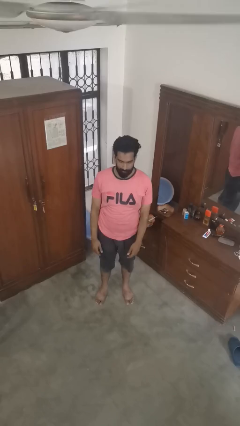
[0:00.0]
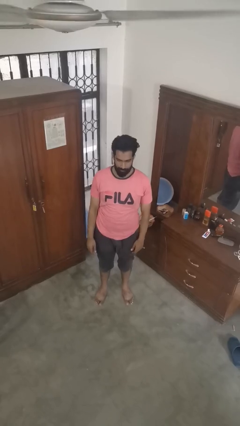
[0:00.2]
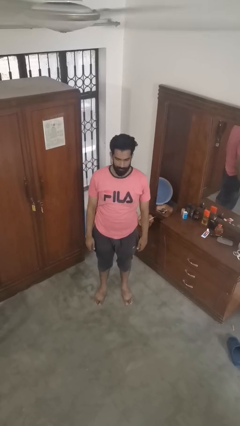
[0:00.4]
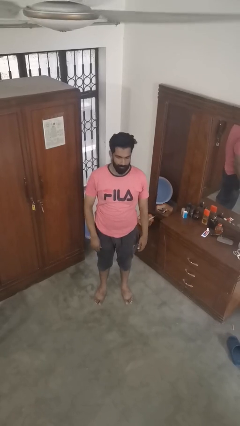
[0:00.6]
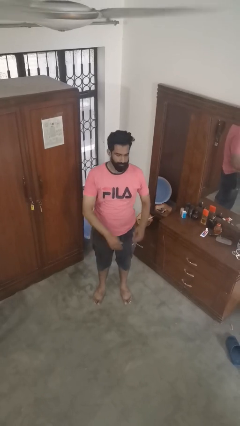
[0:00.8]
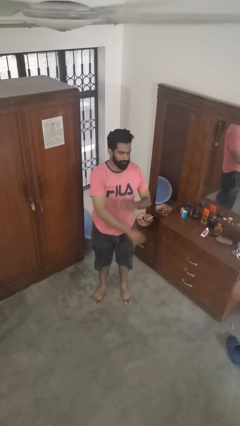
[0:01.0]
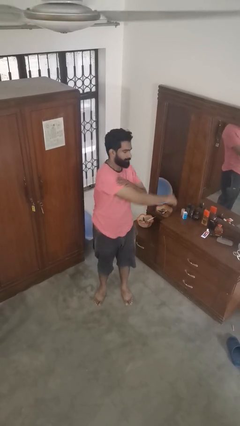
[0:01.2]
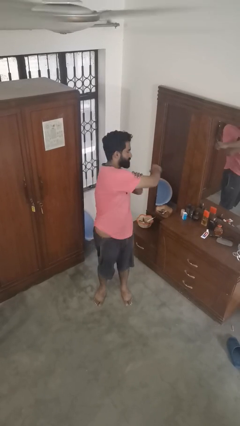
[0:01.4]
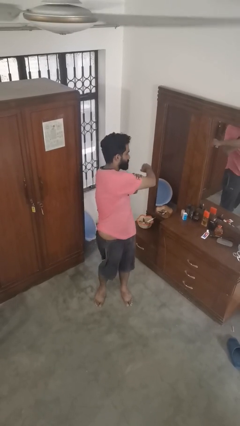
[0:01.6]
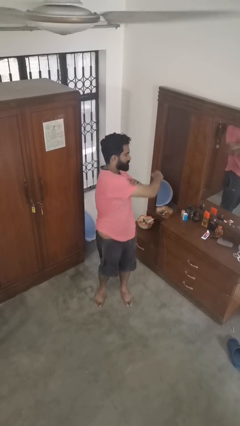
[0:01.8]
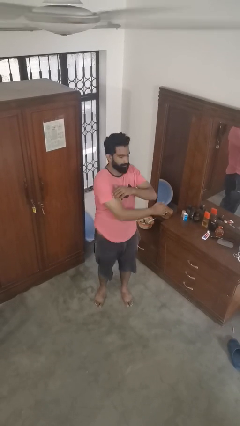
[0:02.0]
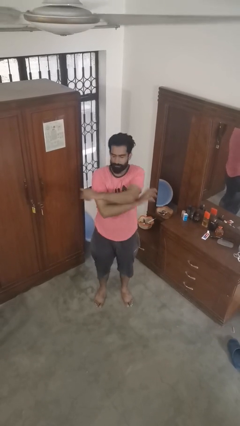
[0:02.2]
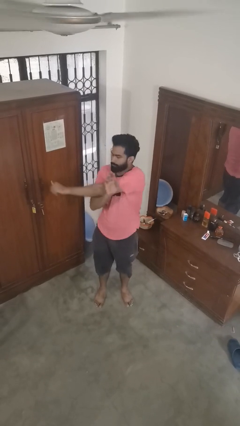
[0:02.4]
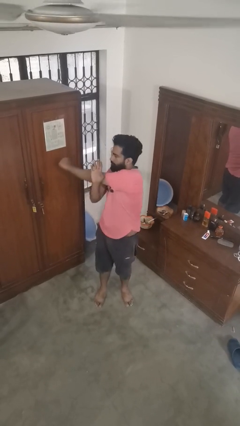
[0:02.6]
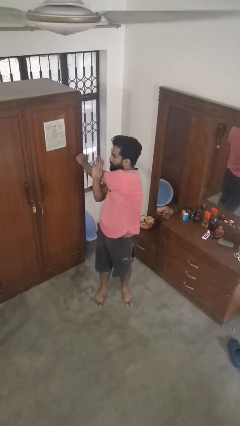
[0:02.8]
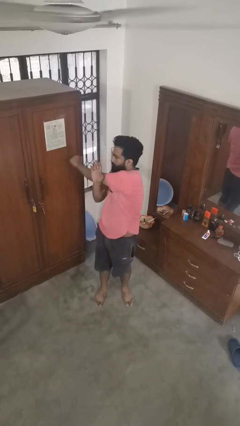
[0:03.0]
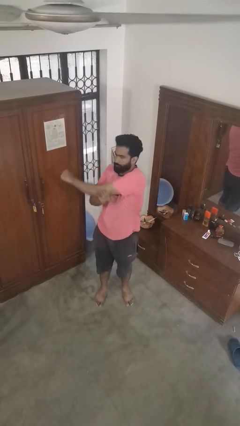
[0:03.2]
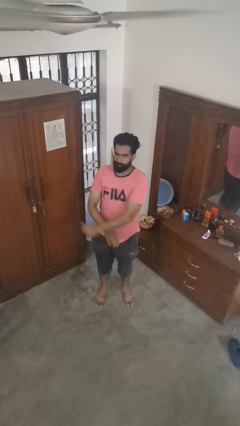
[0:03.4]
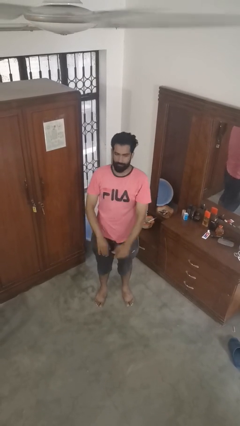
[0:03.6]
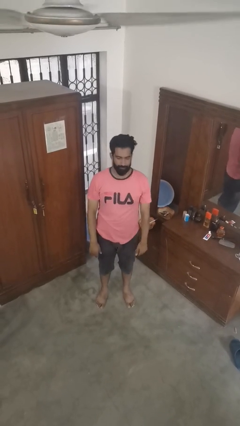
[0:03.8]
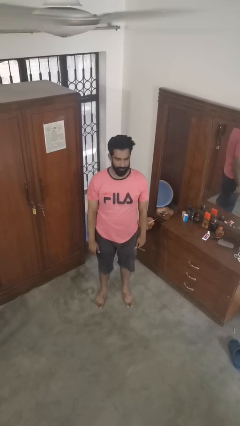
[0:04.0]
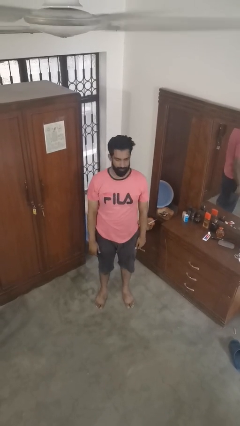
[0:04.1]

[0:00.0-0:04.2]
person stretches arms to side

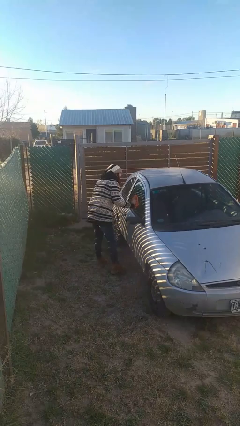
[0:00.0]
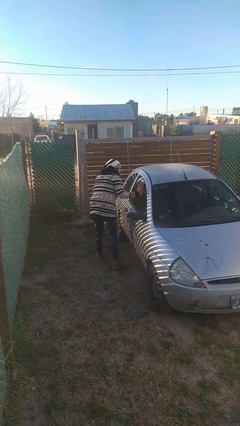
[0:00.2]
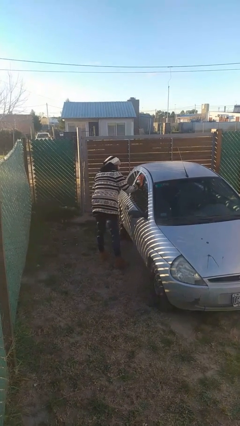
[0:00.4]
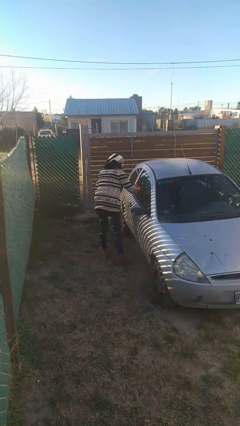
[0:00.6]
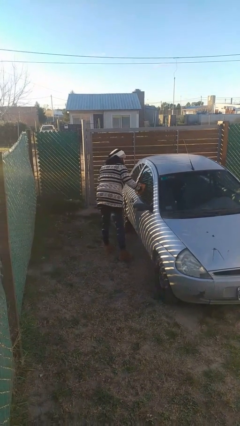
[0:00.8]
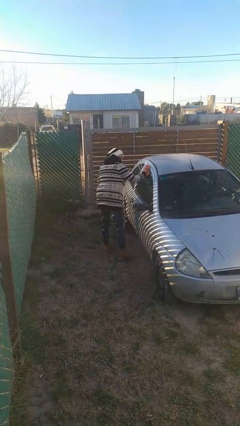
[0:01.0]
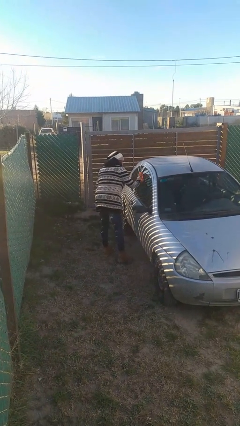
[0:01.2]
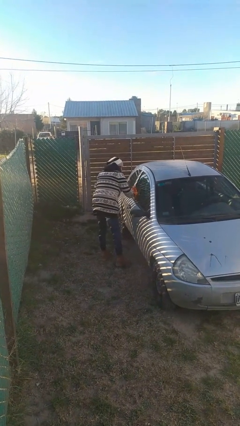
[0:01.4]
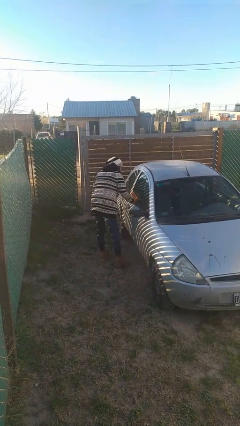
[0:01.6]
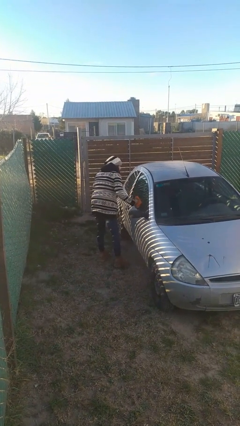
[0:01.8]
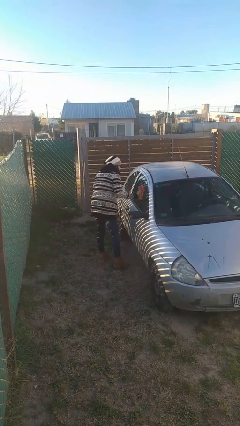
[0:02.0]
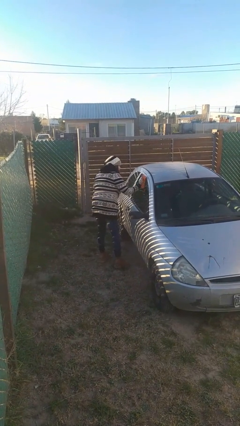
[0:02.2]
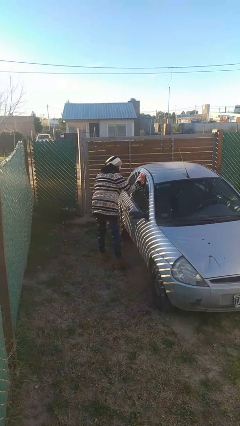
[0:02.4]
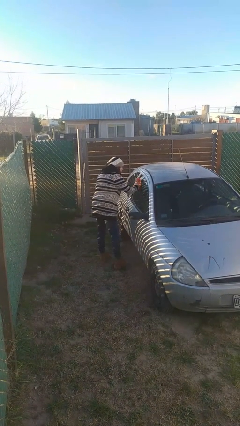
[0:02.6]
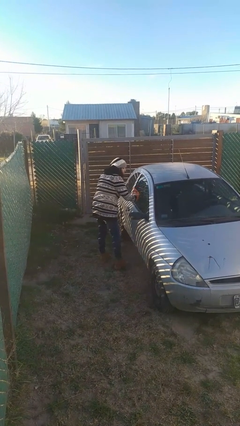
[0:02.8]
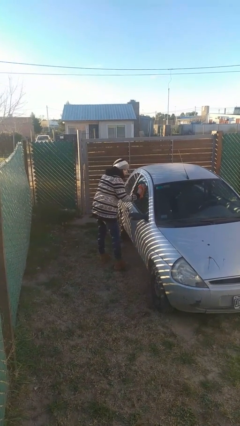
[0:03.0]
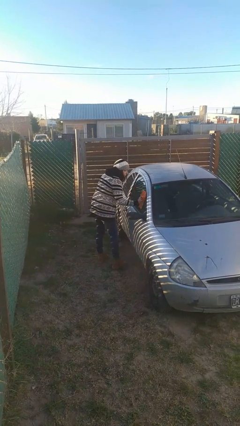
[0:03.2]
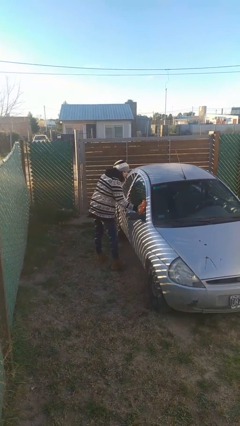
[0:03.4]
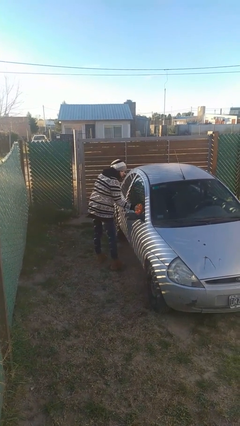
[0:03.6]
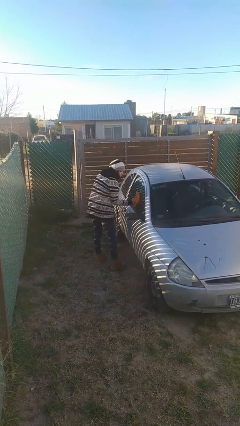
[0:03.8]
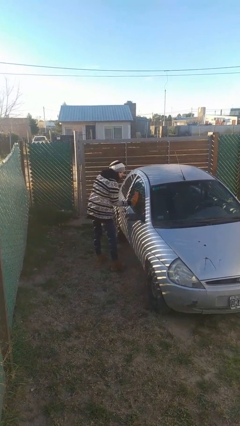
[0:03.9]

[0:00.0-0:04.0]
person polishes car with rag

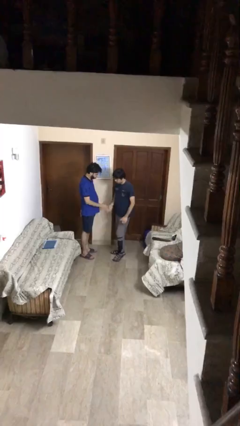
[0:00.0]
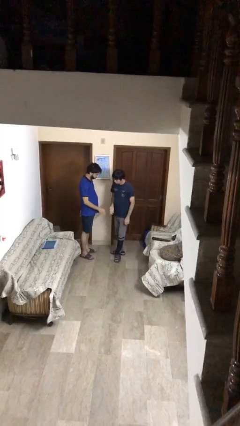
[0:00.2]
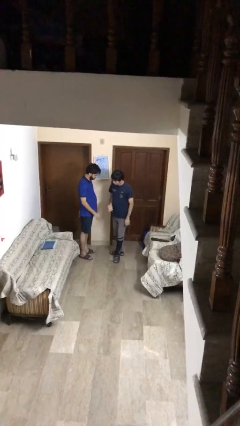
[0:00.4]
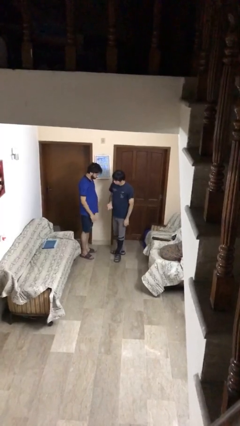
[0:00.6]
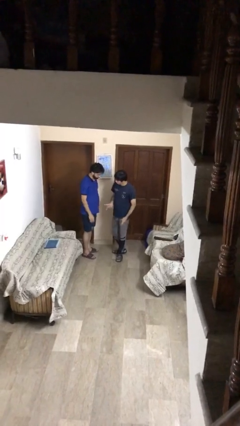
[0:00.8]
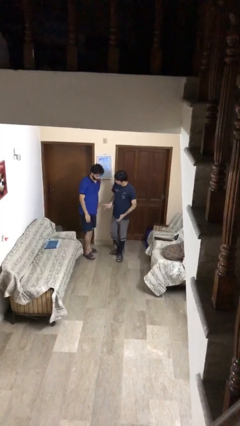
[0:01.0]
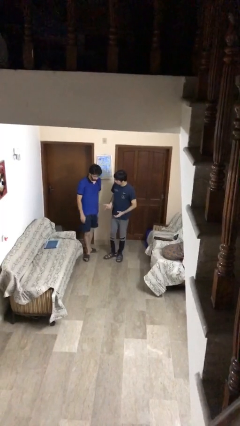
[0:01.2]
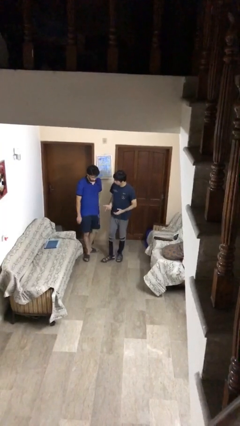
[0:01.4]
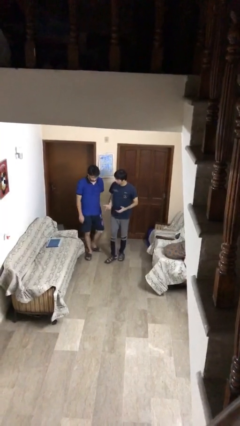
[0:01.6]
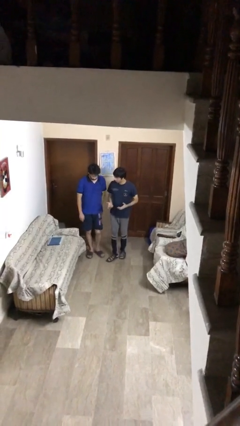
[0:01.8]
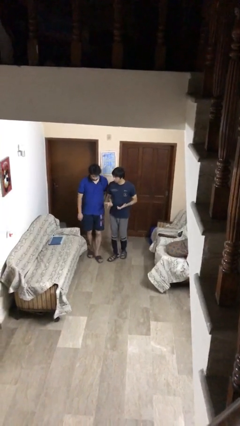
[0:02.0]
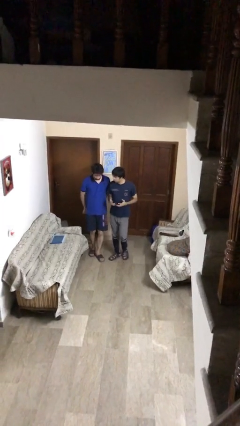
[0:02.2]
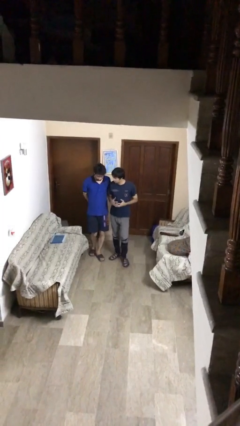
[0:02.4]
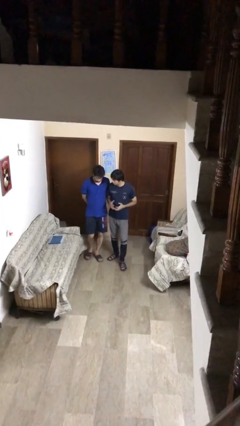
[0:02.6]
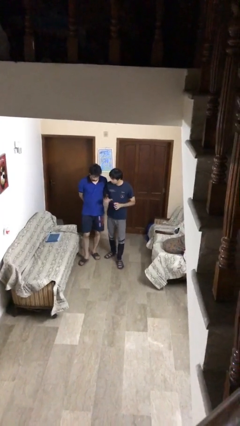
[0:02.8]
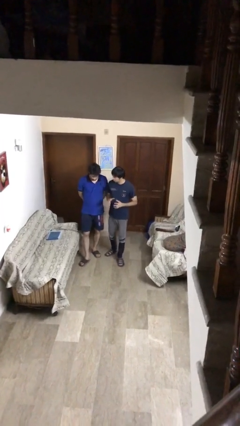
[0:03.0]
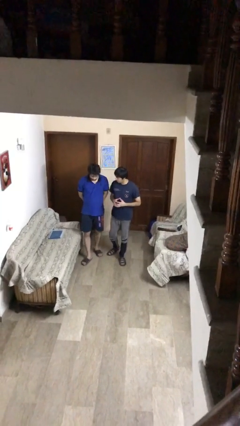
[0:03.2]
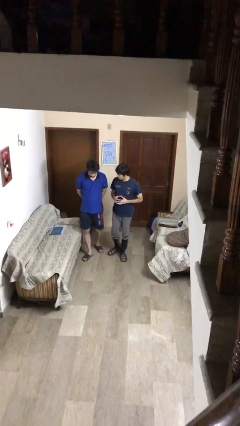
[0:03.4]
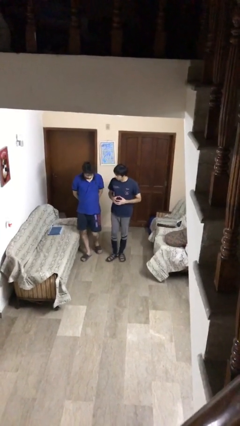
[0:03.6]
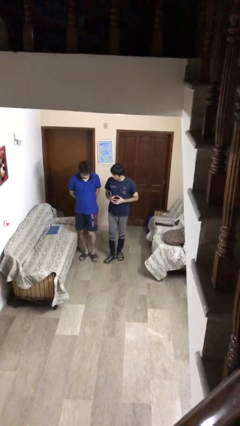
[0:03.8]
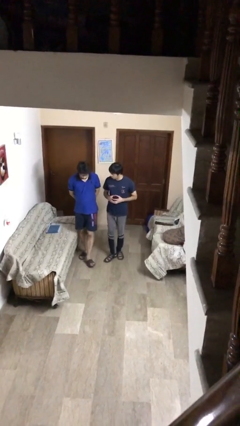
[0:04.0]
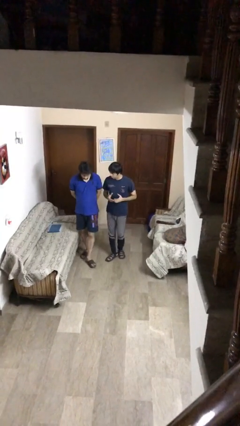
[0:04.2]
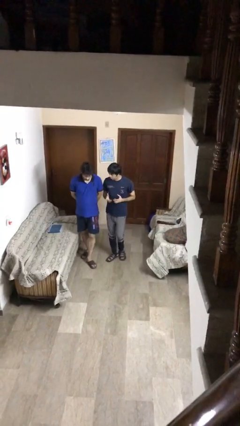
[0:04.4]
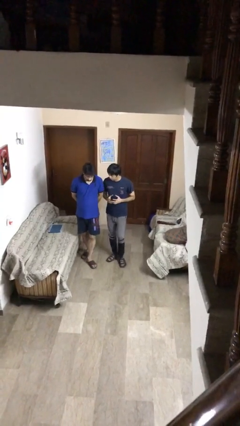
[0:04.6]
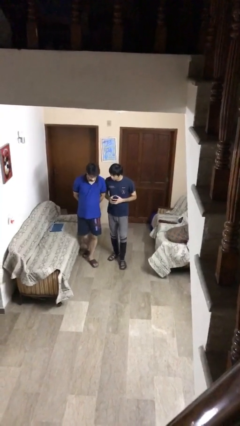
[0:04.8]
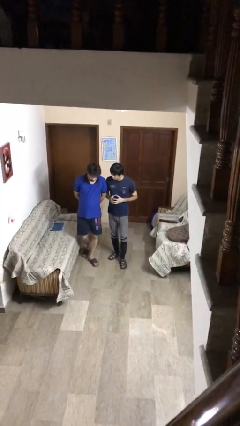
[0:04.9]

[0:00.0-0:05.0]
person talks to person

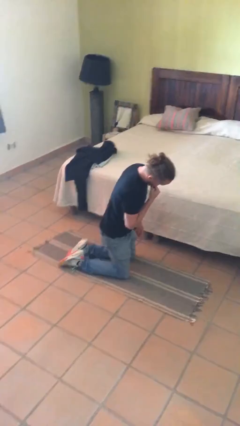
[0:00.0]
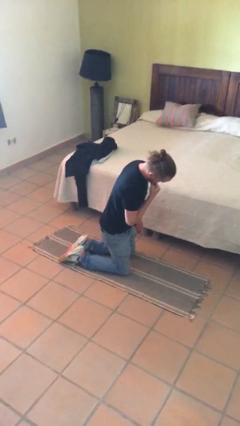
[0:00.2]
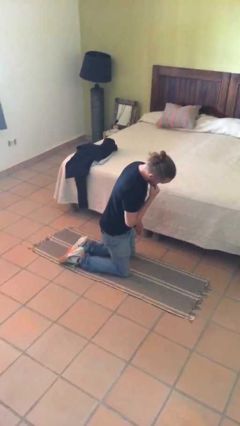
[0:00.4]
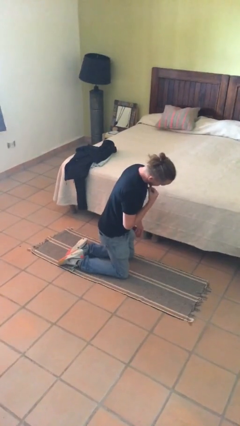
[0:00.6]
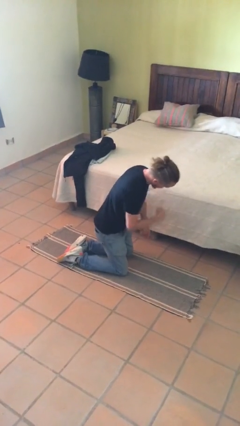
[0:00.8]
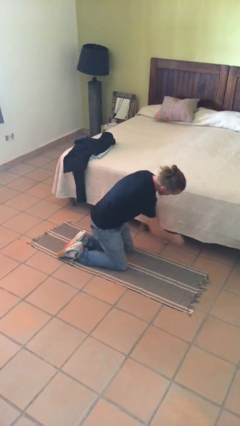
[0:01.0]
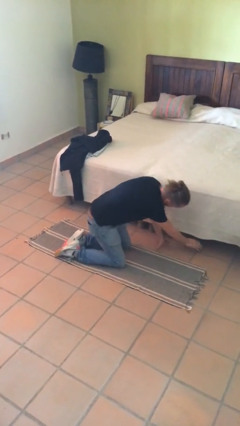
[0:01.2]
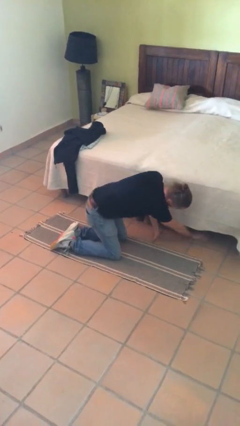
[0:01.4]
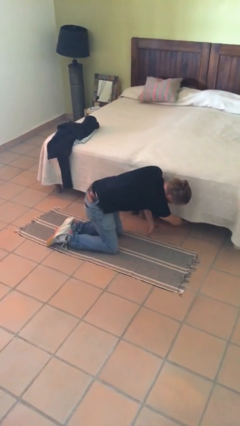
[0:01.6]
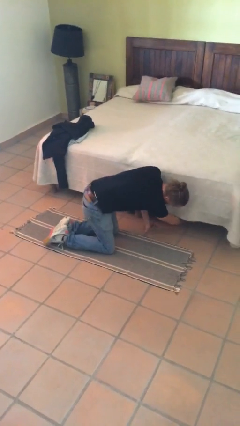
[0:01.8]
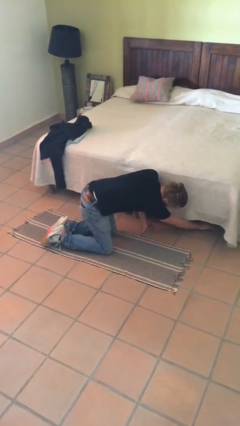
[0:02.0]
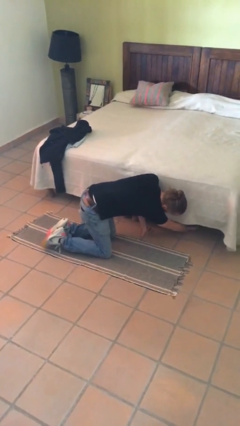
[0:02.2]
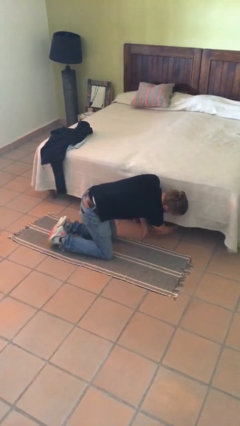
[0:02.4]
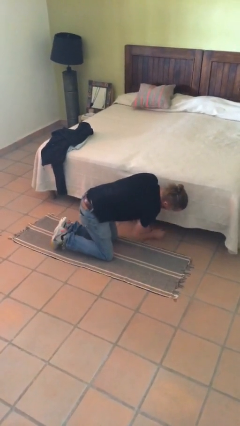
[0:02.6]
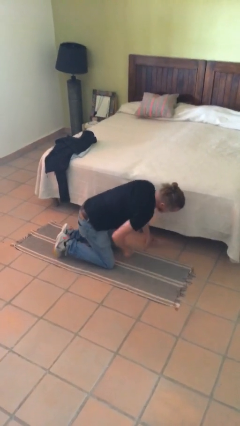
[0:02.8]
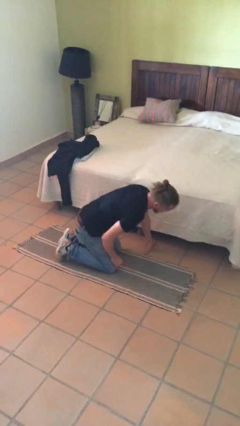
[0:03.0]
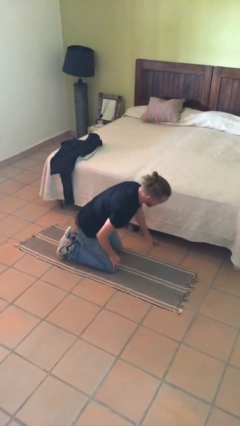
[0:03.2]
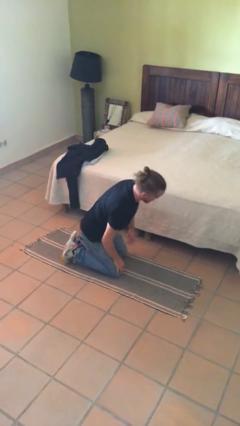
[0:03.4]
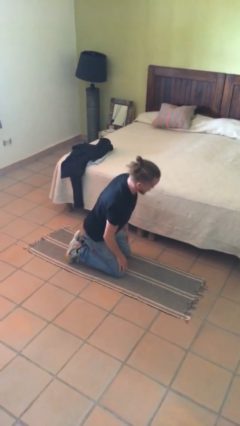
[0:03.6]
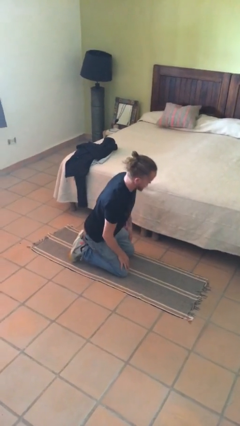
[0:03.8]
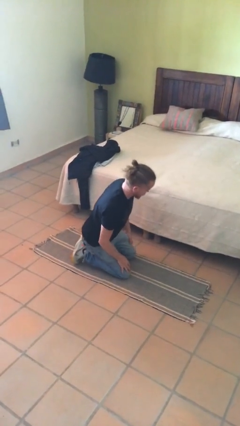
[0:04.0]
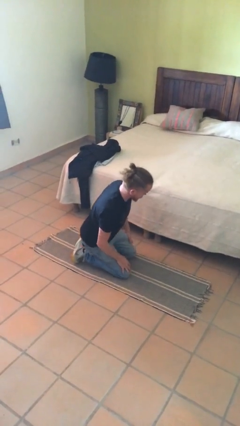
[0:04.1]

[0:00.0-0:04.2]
person searches under bed
